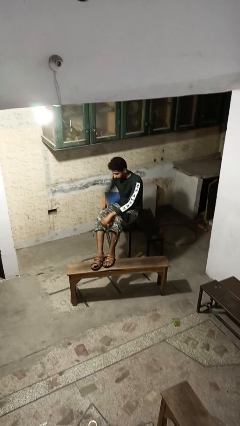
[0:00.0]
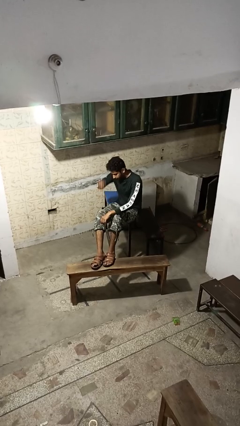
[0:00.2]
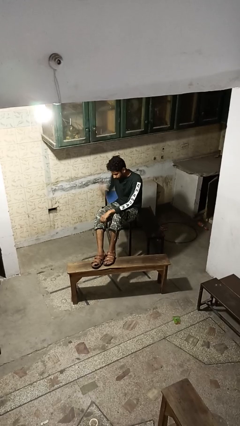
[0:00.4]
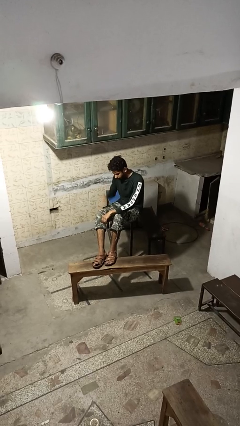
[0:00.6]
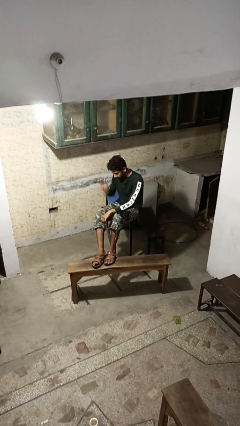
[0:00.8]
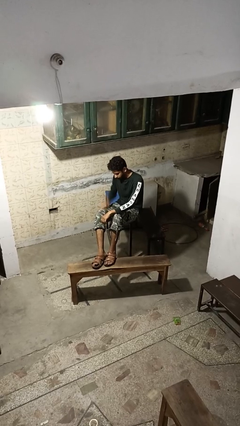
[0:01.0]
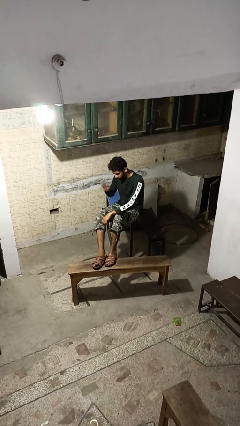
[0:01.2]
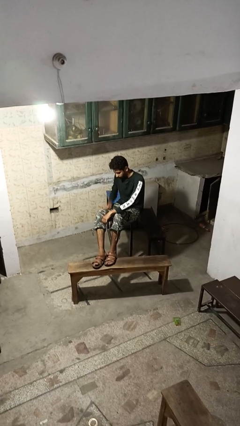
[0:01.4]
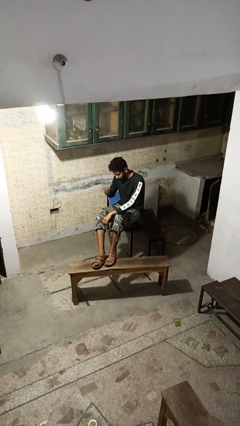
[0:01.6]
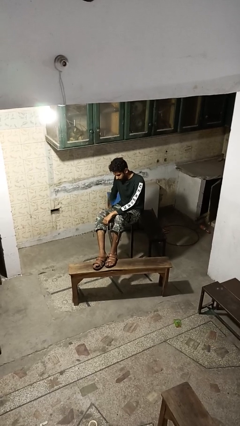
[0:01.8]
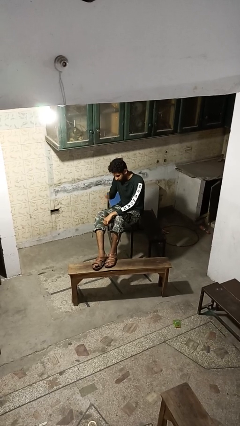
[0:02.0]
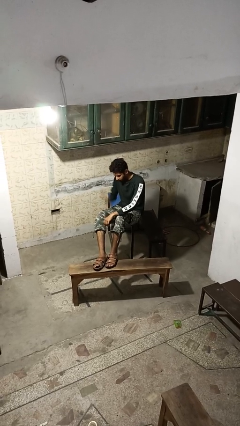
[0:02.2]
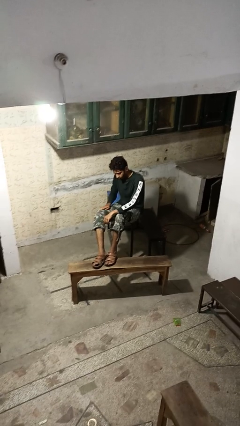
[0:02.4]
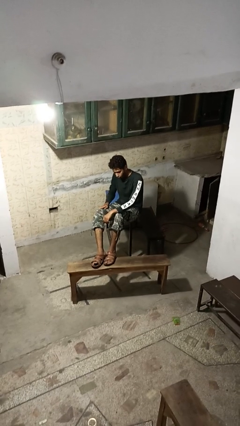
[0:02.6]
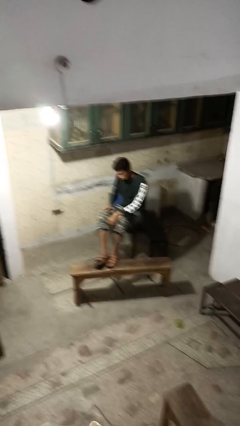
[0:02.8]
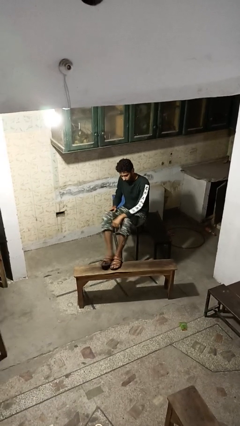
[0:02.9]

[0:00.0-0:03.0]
person slaps hands on thighs

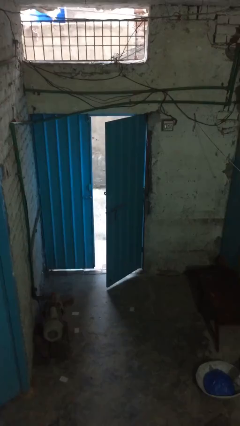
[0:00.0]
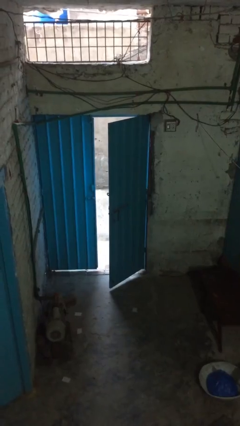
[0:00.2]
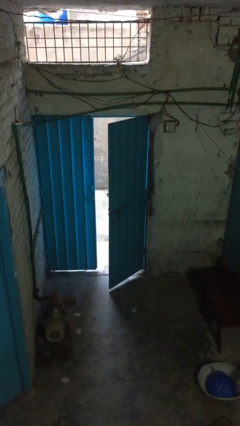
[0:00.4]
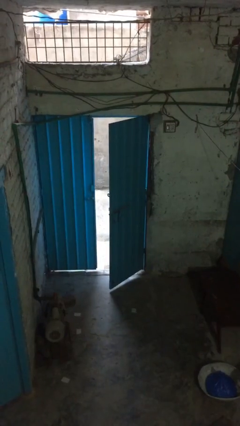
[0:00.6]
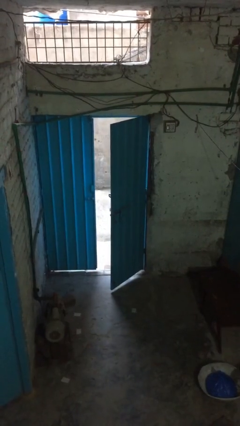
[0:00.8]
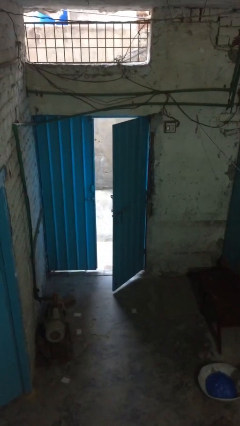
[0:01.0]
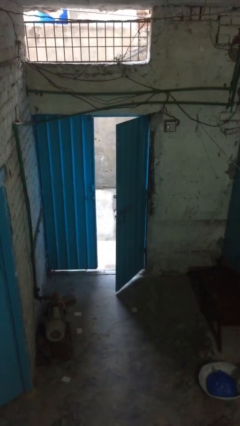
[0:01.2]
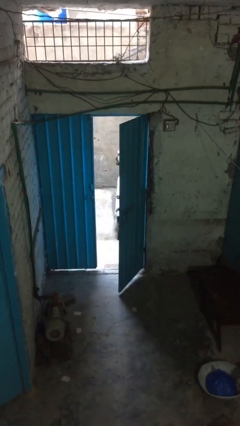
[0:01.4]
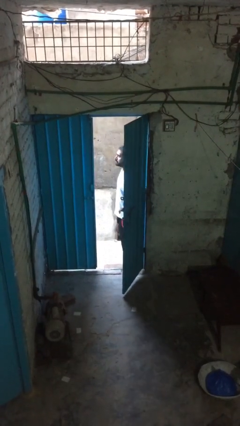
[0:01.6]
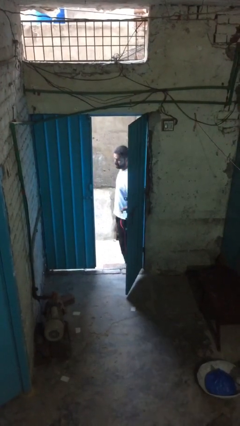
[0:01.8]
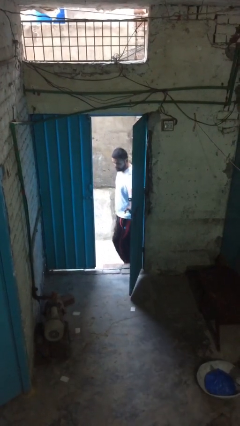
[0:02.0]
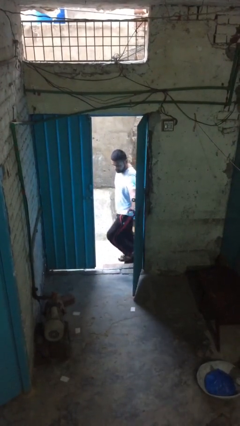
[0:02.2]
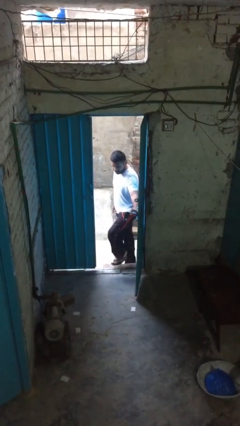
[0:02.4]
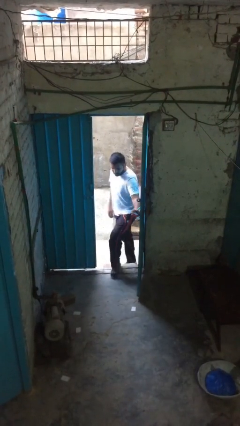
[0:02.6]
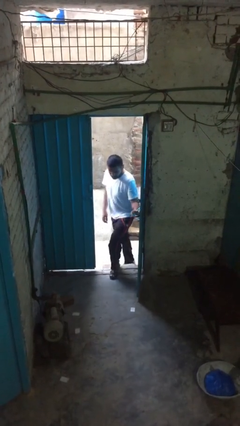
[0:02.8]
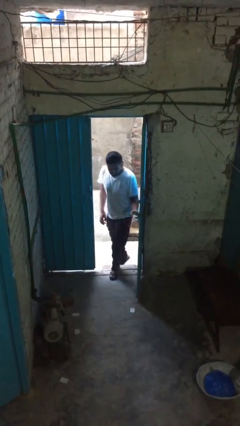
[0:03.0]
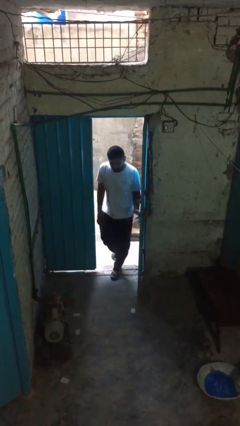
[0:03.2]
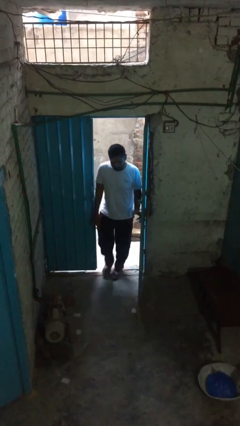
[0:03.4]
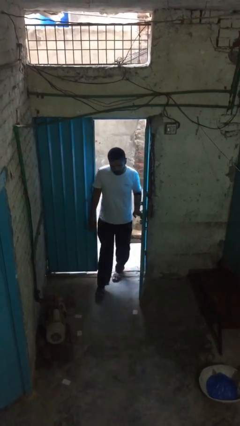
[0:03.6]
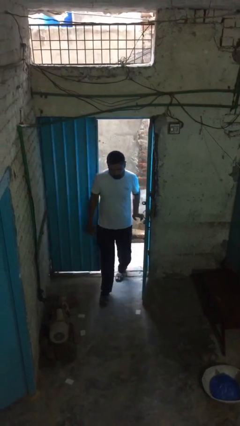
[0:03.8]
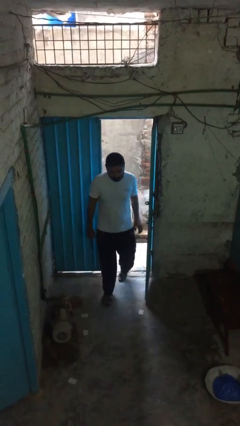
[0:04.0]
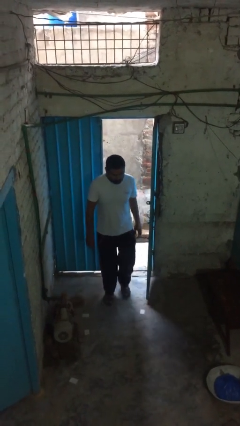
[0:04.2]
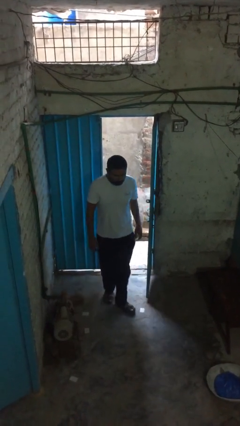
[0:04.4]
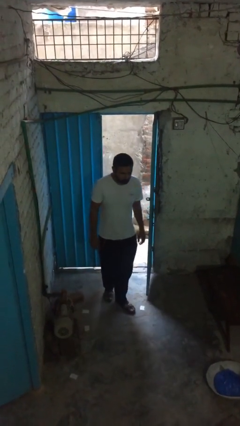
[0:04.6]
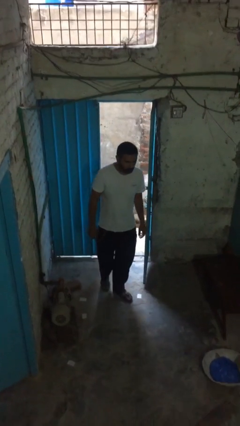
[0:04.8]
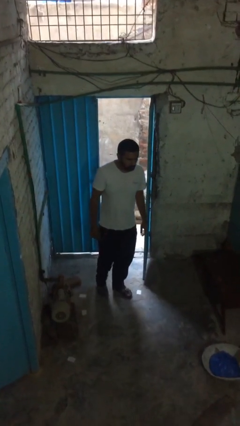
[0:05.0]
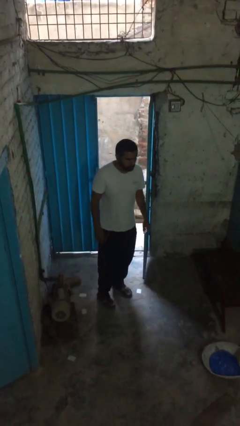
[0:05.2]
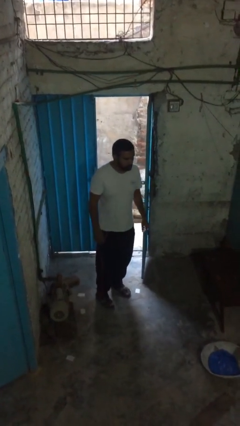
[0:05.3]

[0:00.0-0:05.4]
person enters scene through structure

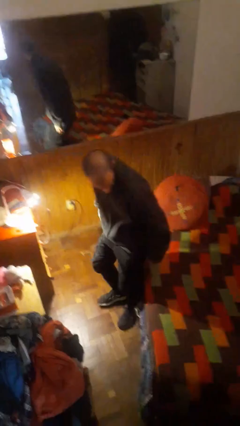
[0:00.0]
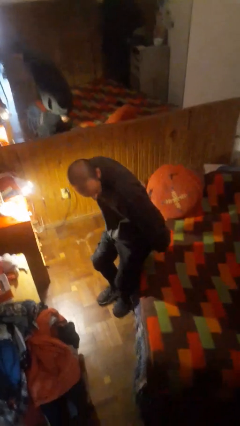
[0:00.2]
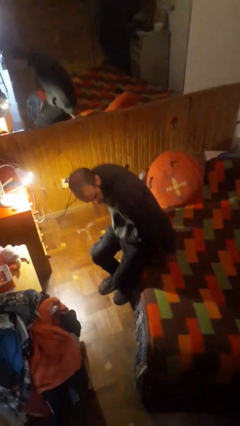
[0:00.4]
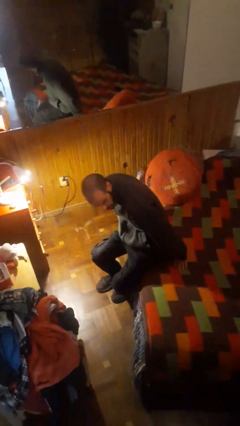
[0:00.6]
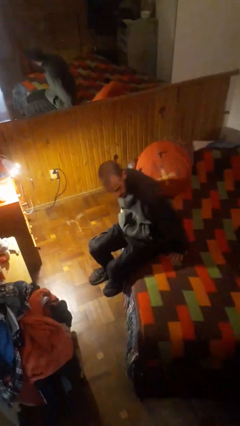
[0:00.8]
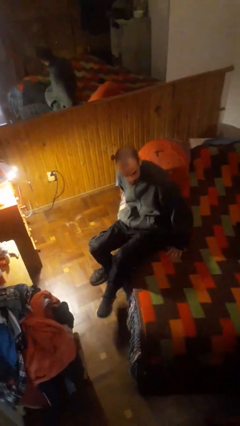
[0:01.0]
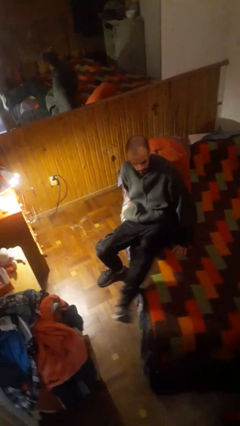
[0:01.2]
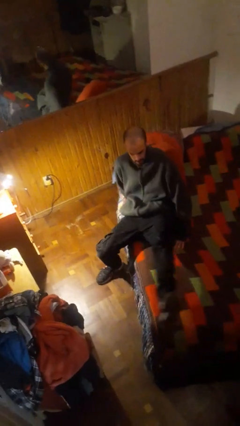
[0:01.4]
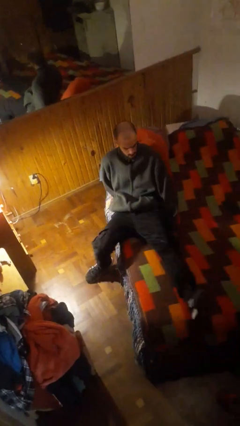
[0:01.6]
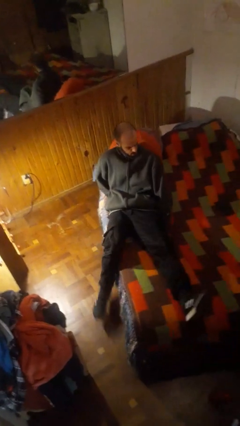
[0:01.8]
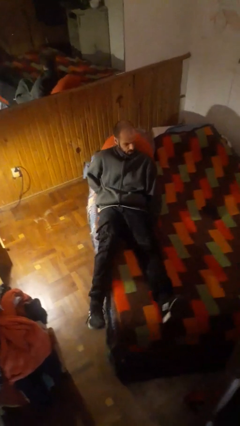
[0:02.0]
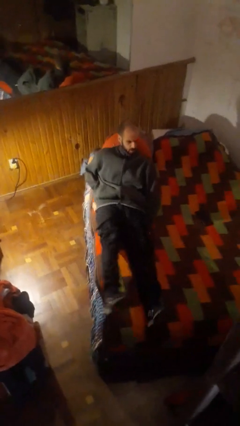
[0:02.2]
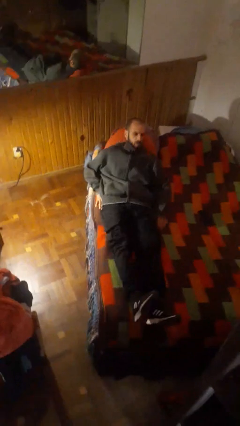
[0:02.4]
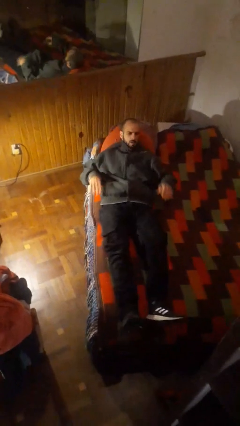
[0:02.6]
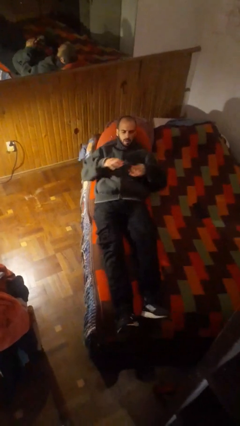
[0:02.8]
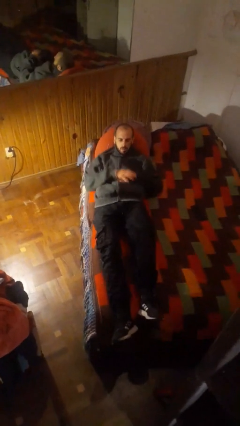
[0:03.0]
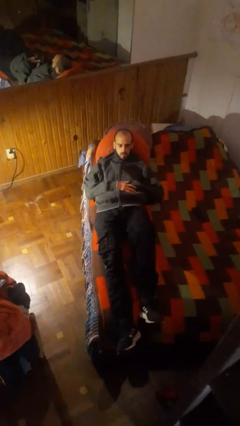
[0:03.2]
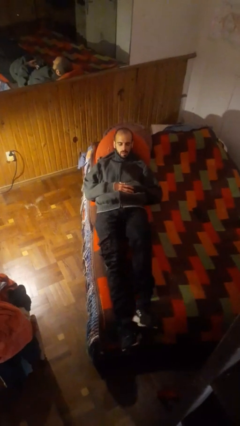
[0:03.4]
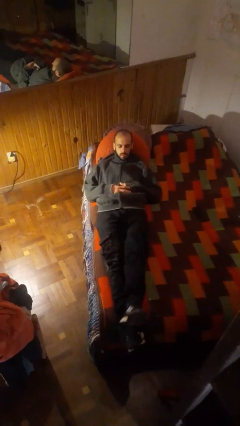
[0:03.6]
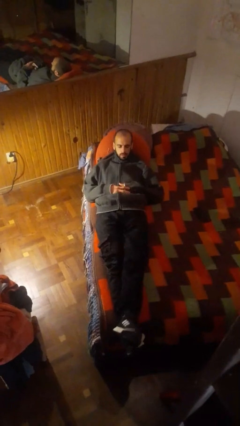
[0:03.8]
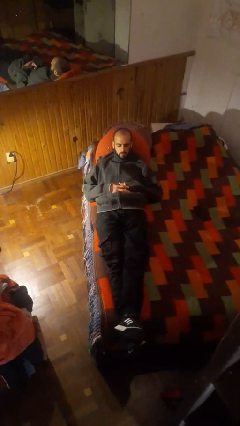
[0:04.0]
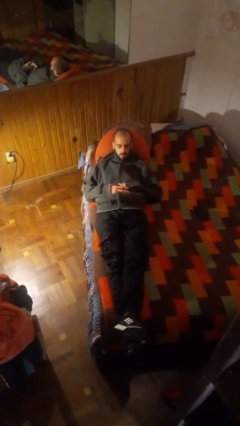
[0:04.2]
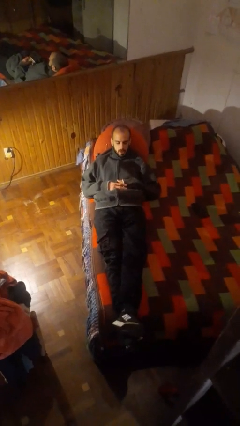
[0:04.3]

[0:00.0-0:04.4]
person lies down on bed

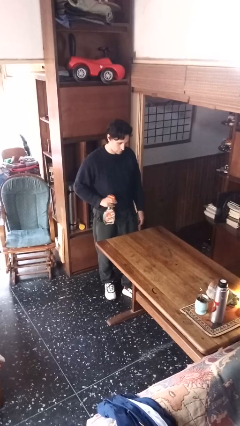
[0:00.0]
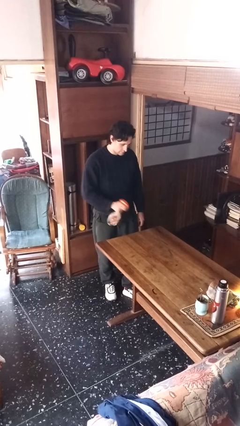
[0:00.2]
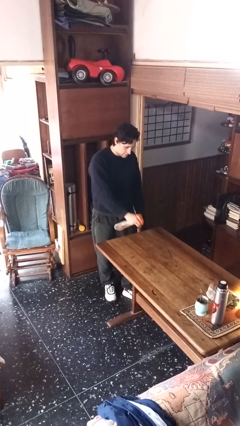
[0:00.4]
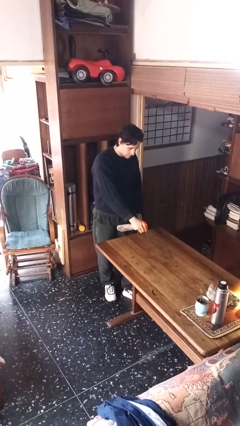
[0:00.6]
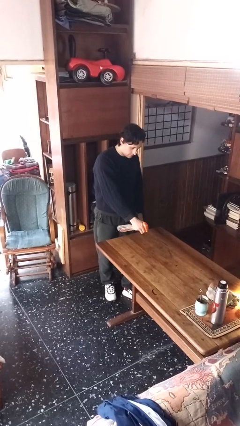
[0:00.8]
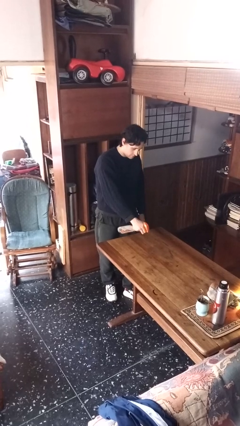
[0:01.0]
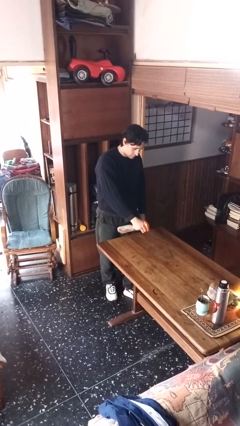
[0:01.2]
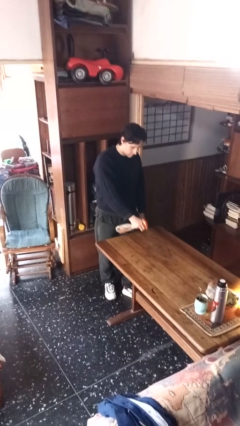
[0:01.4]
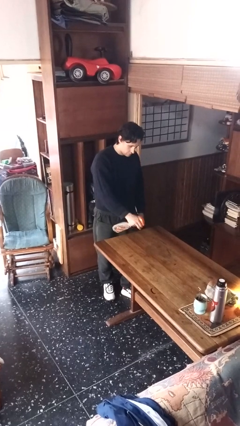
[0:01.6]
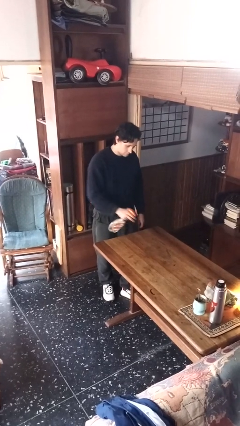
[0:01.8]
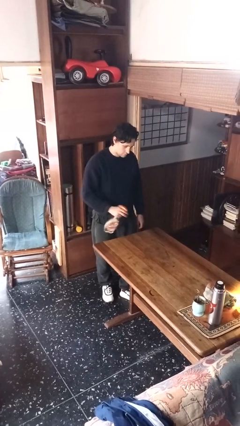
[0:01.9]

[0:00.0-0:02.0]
person sprays from bottle

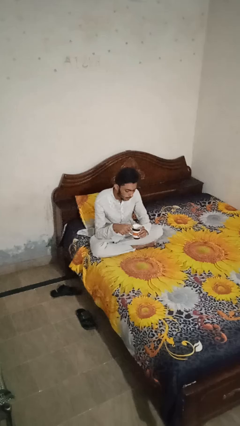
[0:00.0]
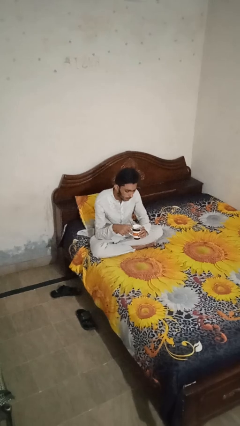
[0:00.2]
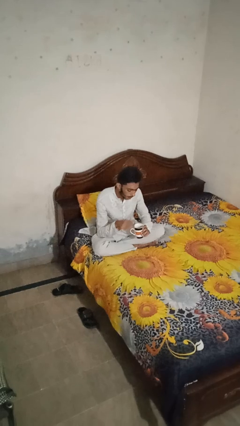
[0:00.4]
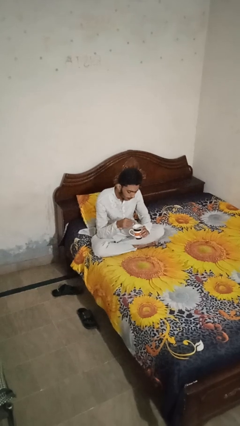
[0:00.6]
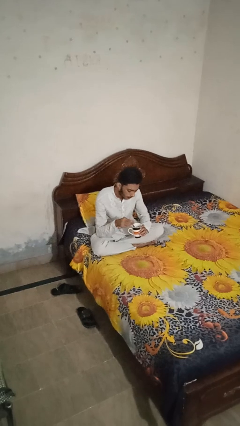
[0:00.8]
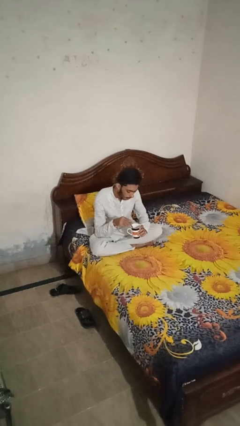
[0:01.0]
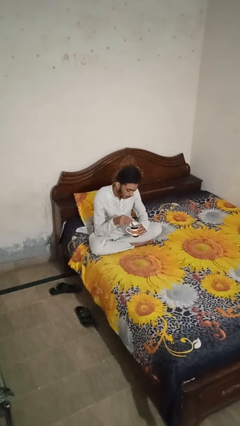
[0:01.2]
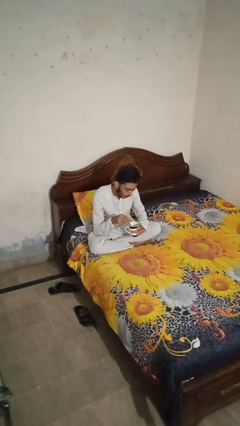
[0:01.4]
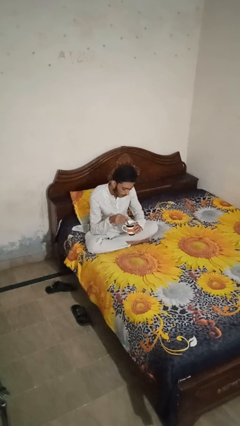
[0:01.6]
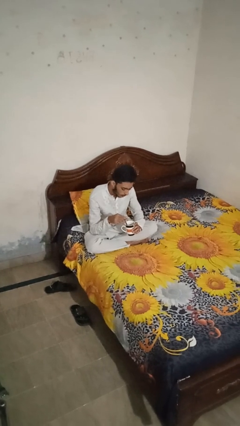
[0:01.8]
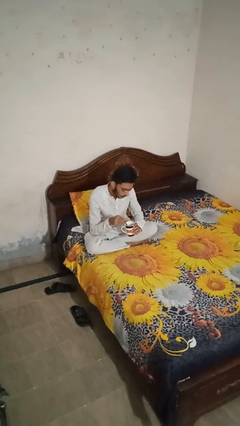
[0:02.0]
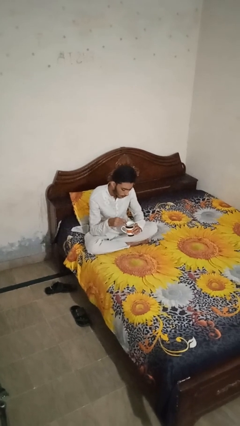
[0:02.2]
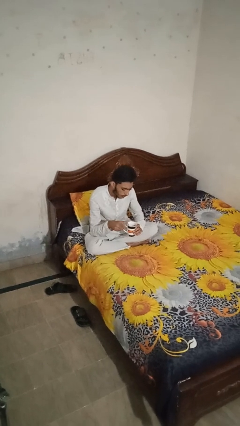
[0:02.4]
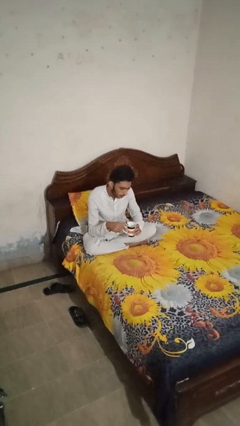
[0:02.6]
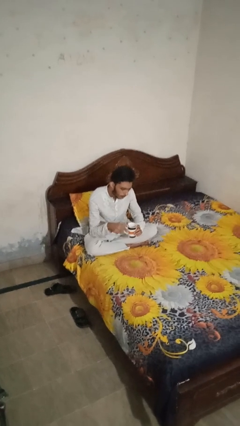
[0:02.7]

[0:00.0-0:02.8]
person stirs mug

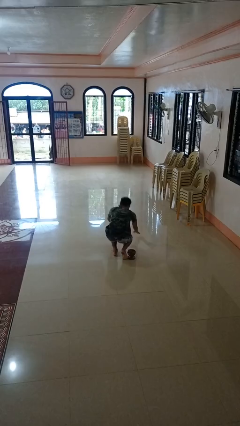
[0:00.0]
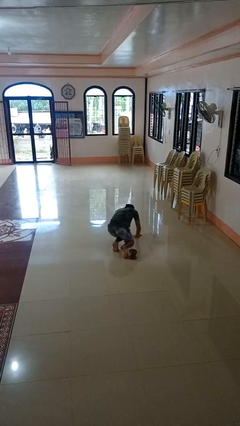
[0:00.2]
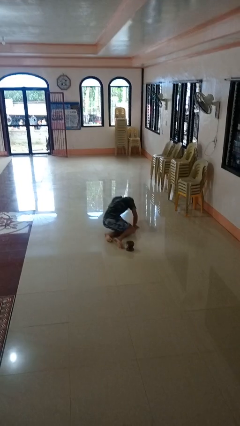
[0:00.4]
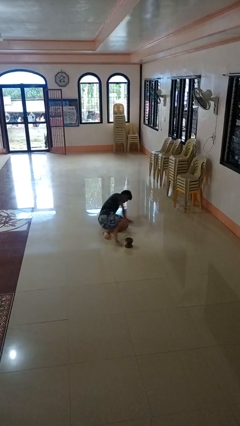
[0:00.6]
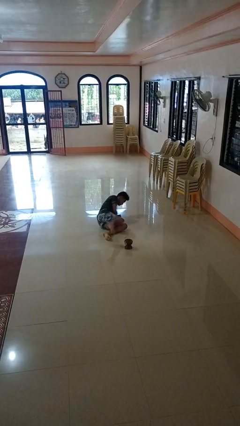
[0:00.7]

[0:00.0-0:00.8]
person trips on object on floor
